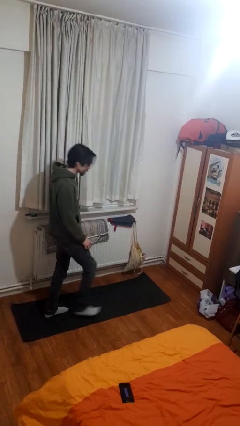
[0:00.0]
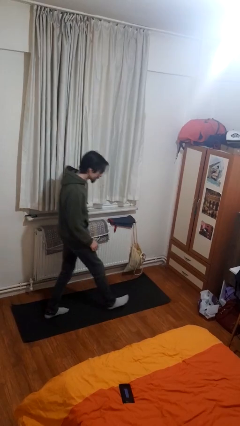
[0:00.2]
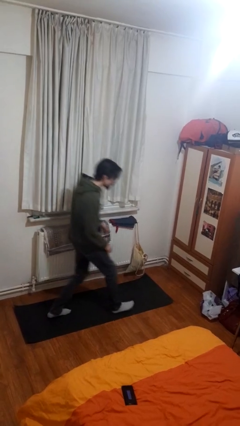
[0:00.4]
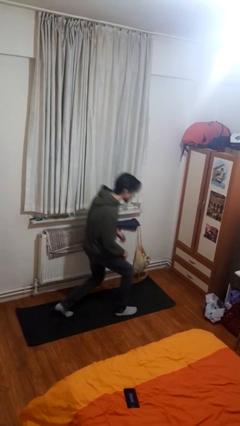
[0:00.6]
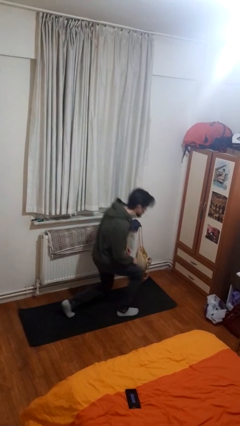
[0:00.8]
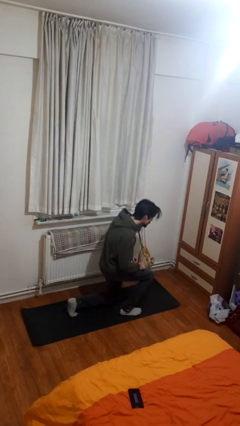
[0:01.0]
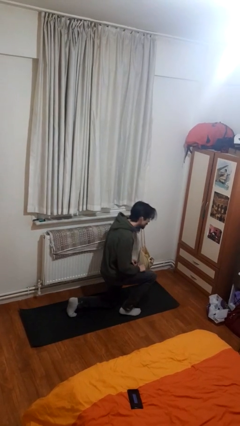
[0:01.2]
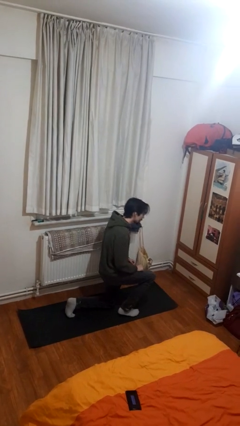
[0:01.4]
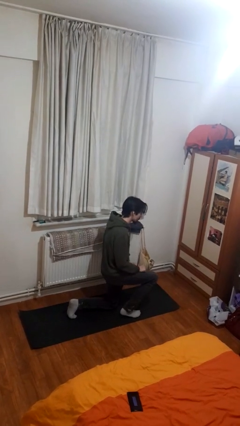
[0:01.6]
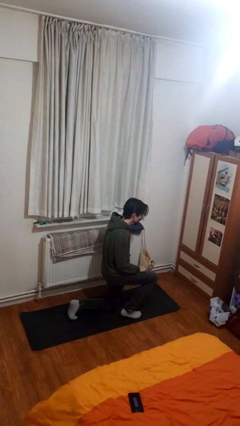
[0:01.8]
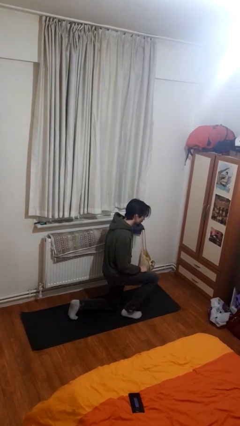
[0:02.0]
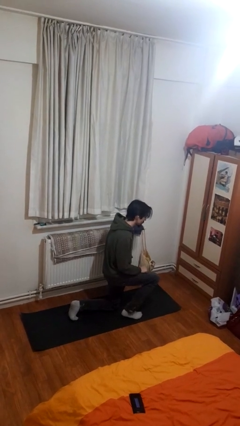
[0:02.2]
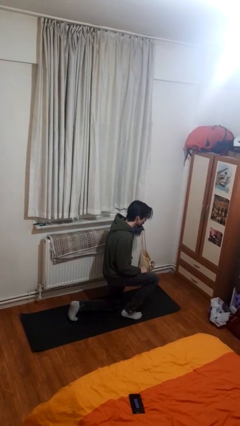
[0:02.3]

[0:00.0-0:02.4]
person kneels

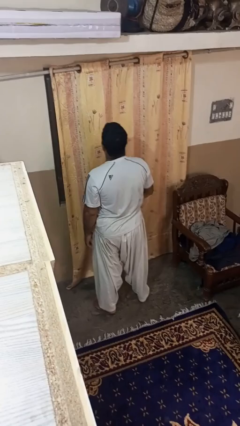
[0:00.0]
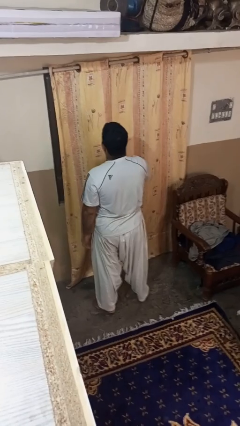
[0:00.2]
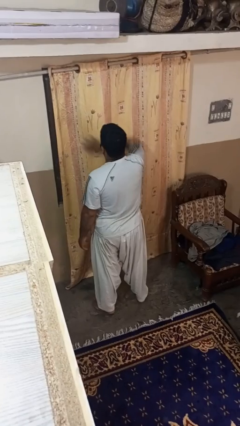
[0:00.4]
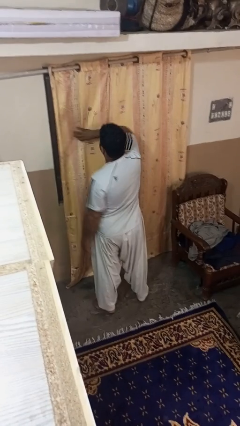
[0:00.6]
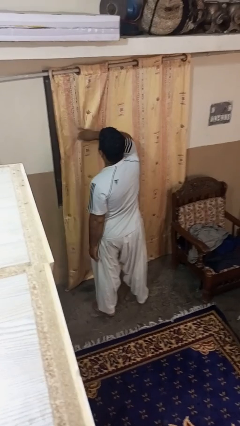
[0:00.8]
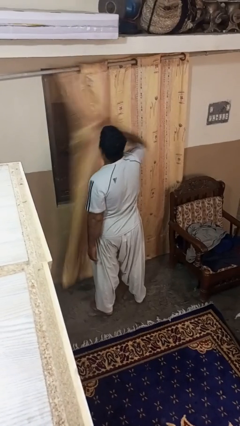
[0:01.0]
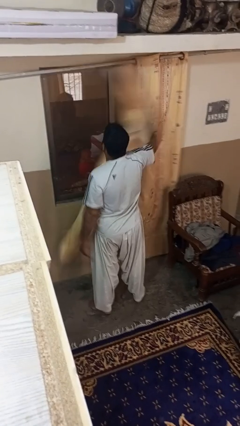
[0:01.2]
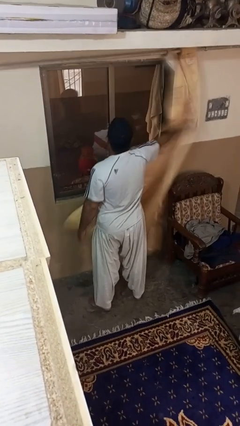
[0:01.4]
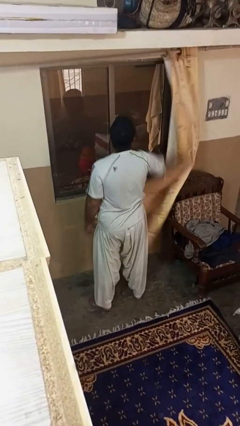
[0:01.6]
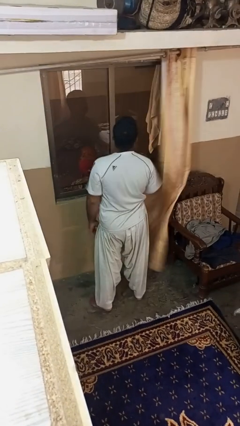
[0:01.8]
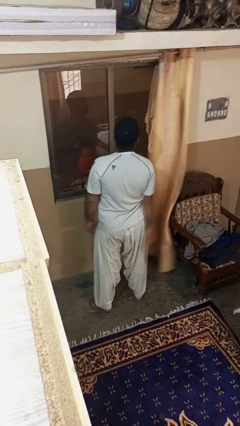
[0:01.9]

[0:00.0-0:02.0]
person opens curtains

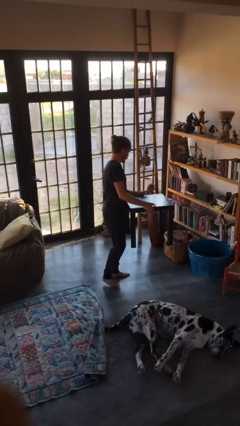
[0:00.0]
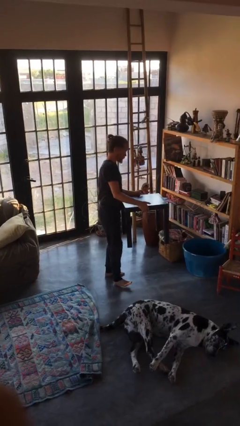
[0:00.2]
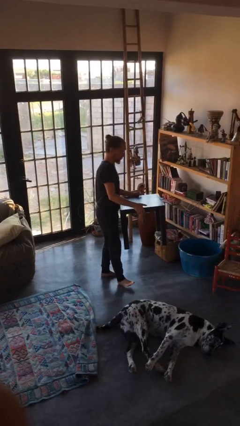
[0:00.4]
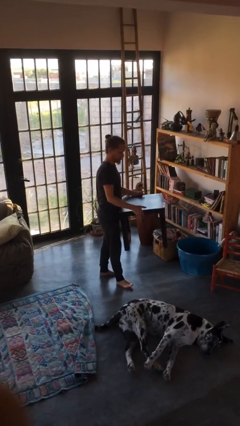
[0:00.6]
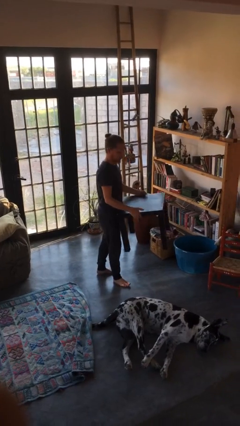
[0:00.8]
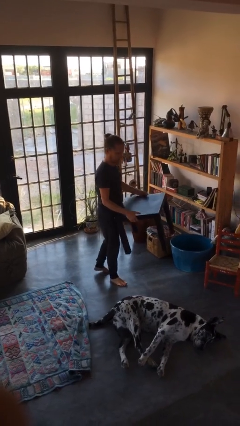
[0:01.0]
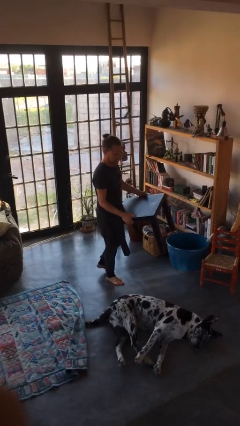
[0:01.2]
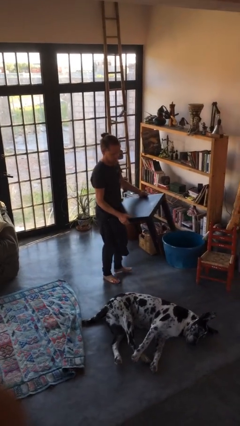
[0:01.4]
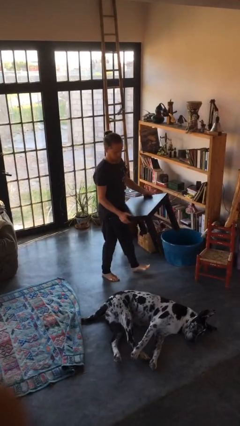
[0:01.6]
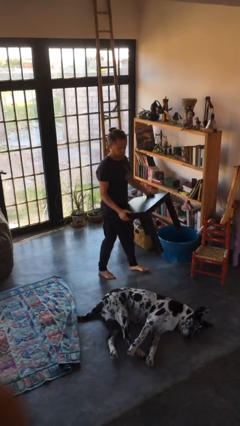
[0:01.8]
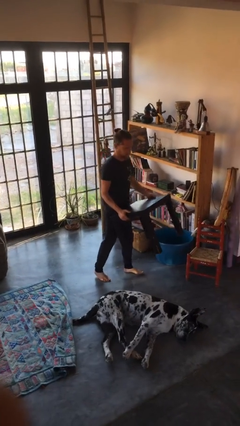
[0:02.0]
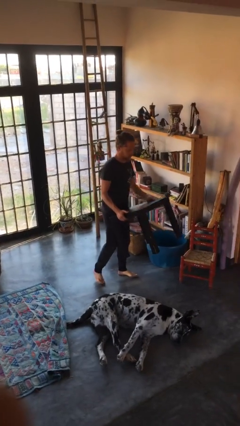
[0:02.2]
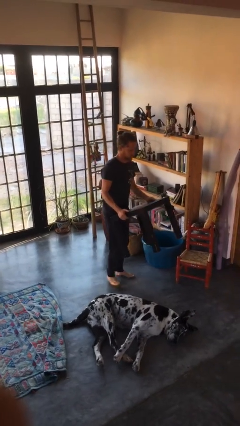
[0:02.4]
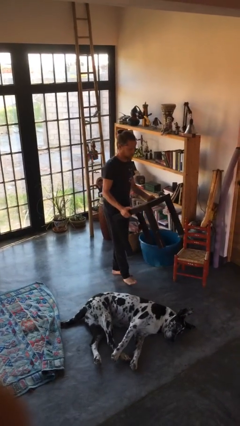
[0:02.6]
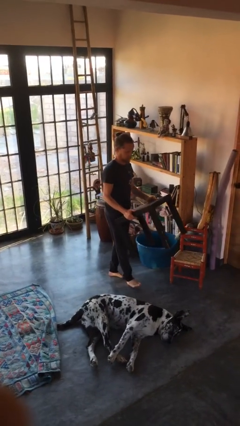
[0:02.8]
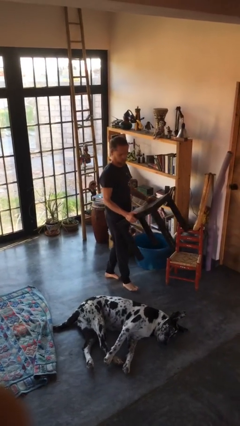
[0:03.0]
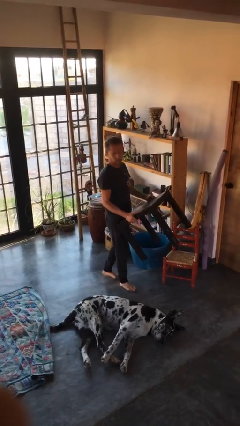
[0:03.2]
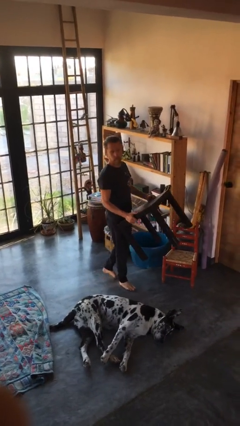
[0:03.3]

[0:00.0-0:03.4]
person carries furniture

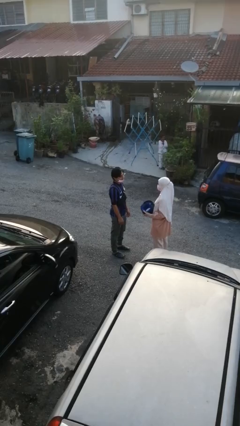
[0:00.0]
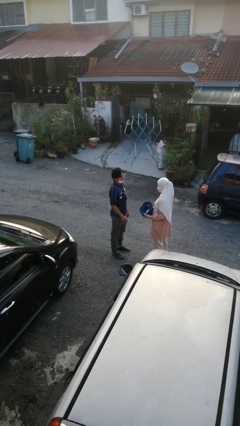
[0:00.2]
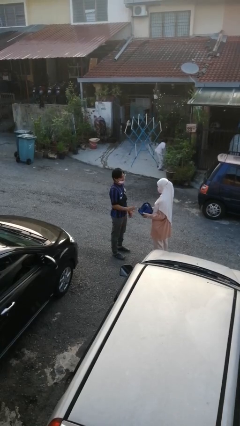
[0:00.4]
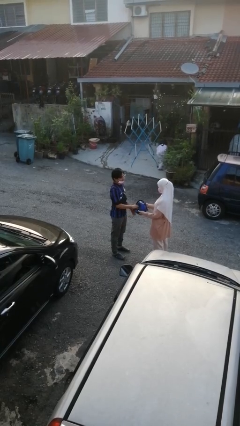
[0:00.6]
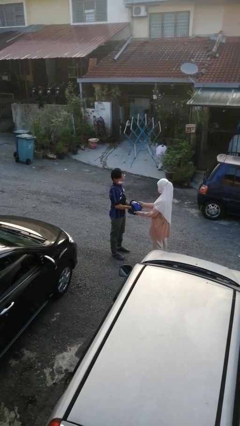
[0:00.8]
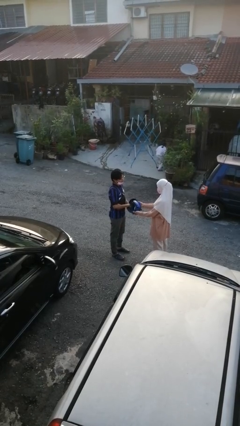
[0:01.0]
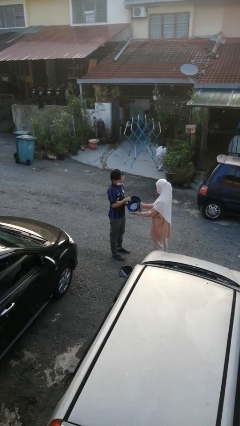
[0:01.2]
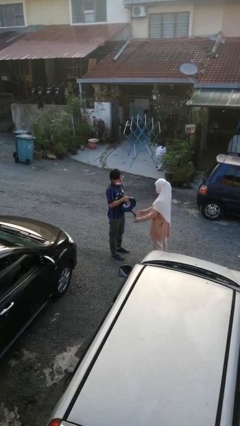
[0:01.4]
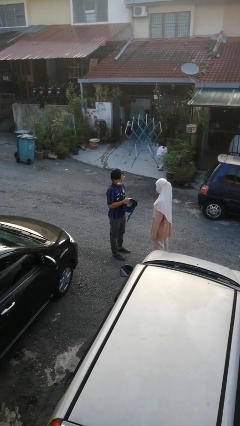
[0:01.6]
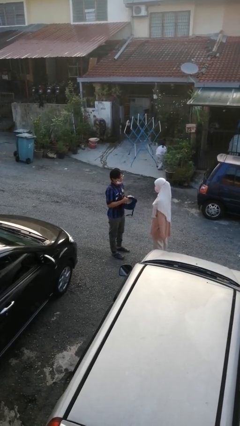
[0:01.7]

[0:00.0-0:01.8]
person transfers object to person

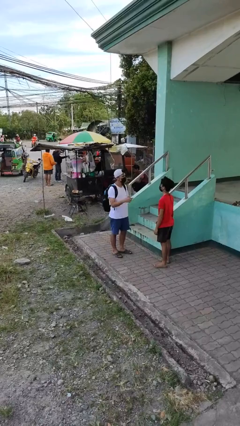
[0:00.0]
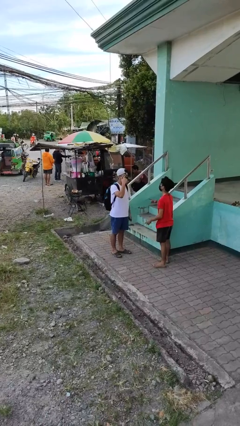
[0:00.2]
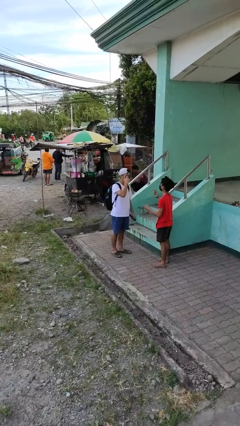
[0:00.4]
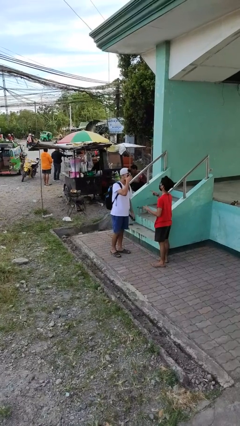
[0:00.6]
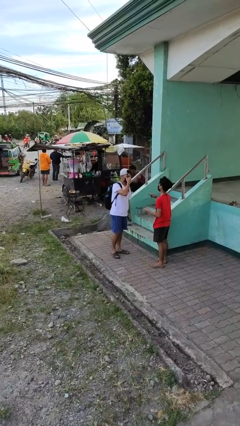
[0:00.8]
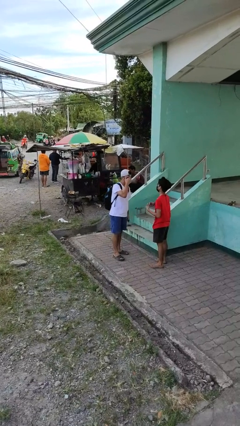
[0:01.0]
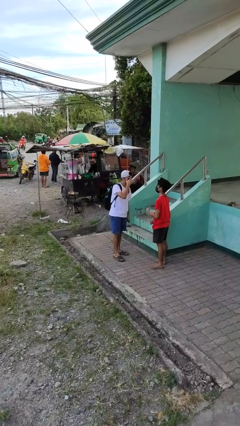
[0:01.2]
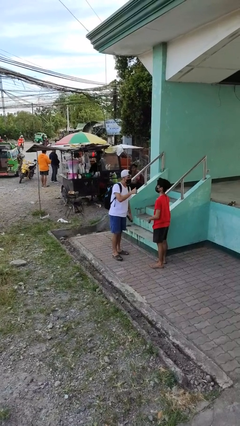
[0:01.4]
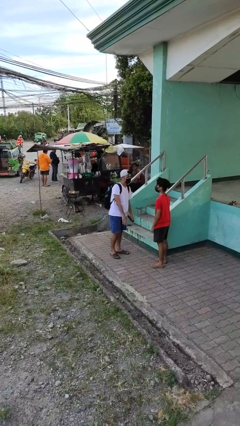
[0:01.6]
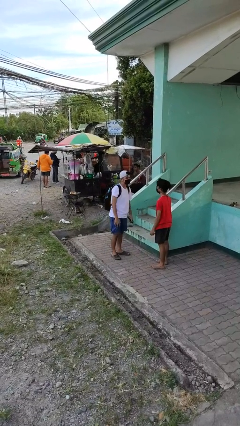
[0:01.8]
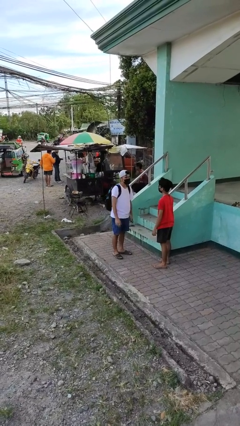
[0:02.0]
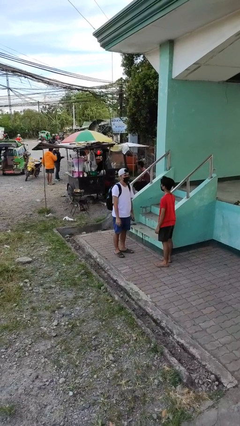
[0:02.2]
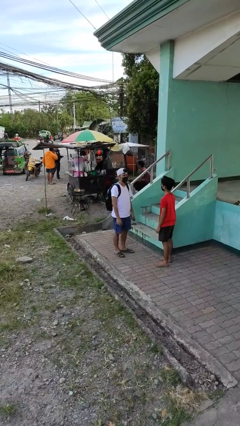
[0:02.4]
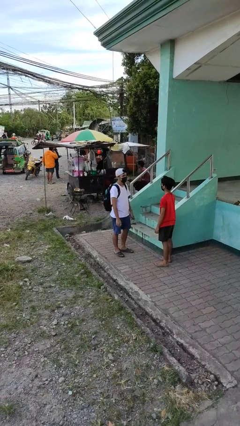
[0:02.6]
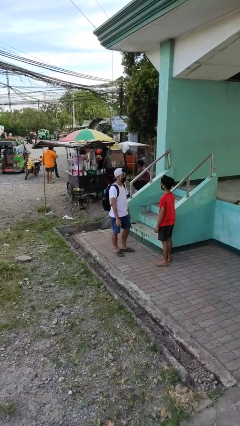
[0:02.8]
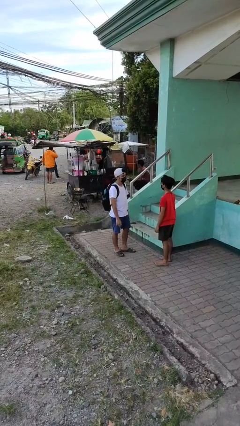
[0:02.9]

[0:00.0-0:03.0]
person talks to person

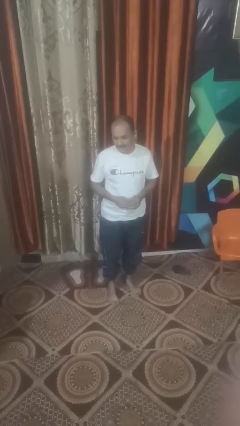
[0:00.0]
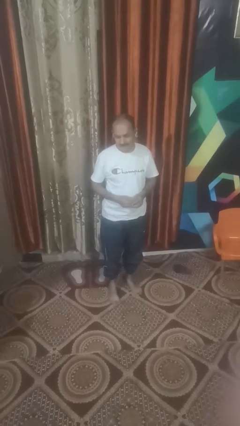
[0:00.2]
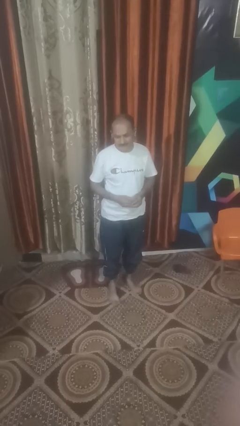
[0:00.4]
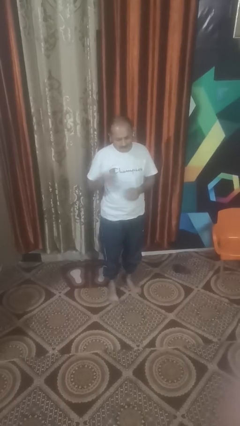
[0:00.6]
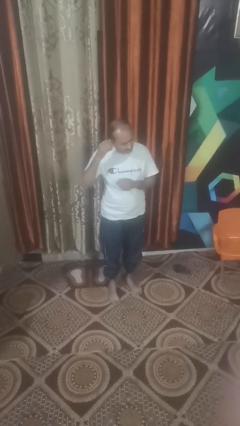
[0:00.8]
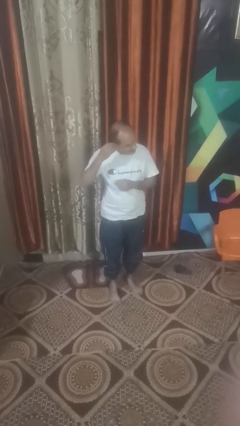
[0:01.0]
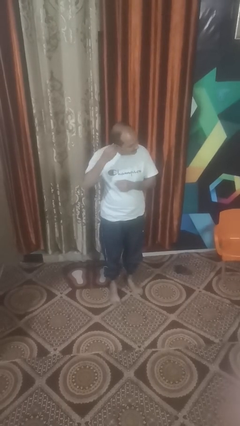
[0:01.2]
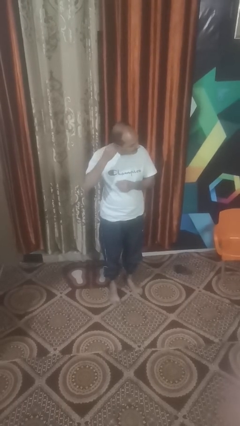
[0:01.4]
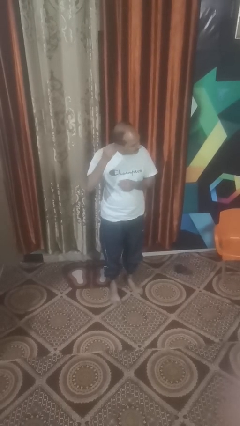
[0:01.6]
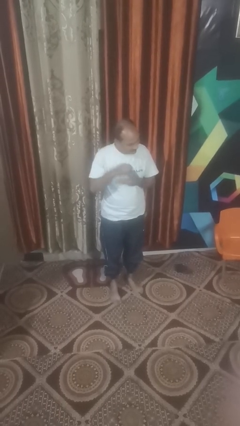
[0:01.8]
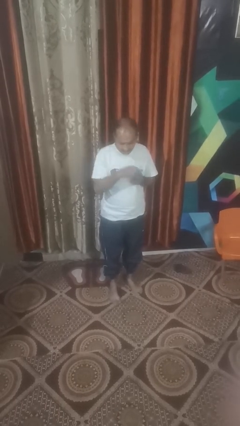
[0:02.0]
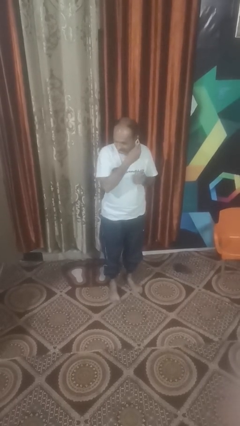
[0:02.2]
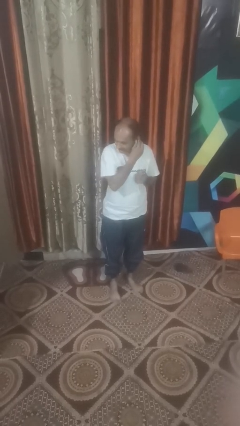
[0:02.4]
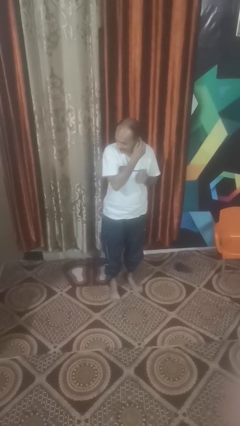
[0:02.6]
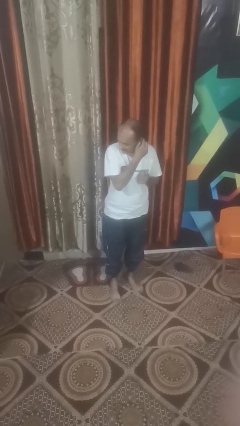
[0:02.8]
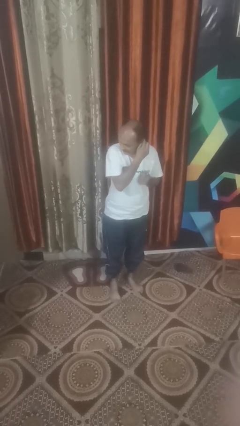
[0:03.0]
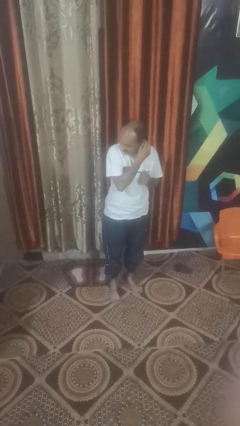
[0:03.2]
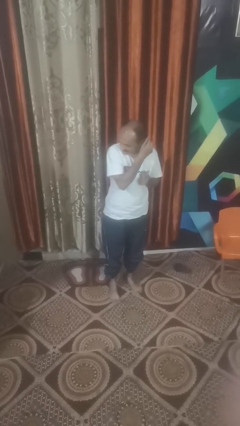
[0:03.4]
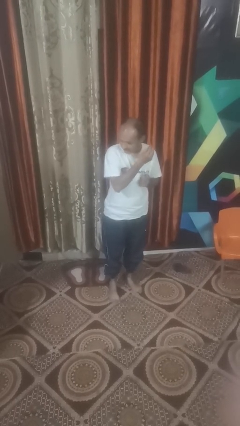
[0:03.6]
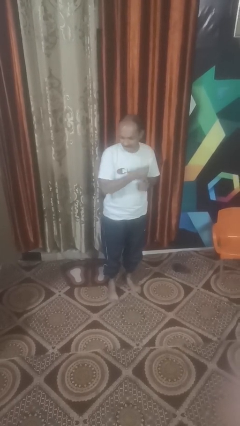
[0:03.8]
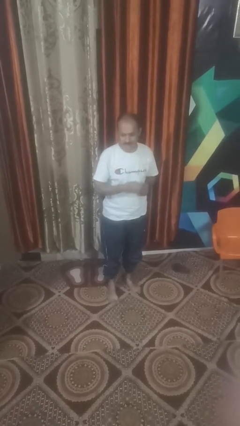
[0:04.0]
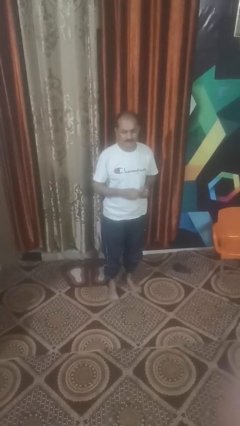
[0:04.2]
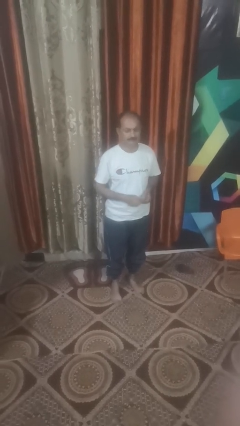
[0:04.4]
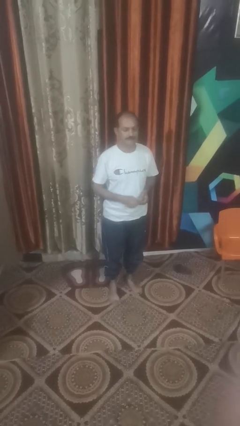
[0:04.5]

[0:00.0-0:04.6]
person takes off earrings
